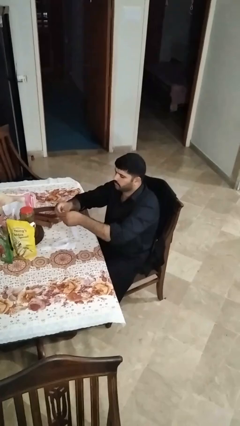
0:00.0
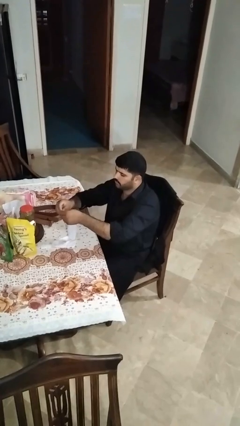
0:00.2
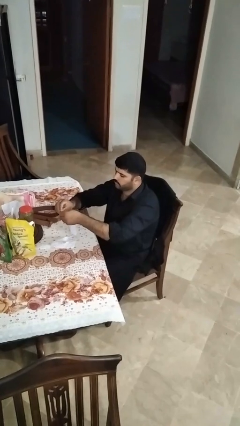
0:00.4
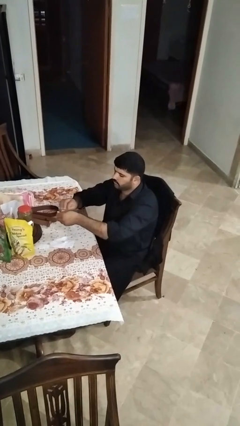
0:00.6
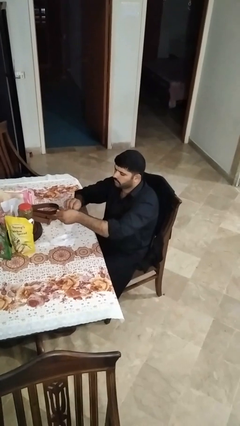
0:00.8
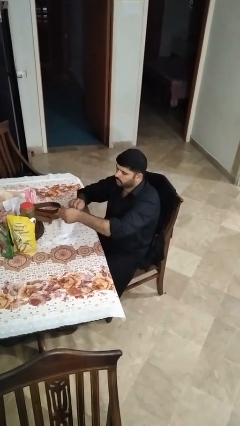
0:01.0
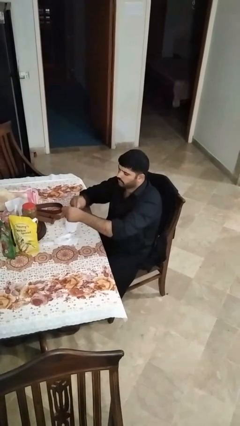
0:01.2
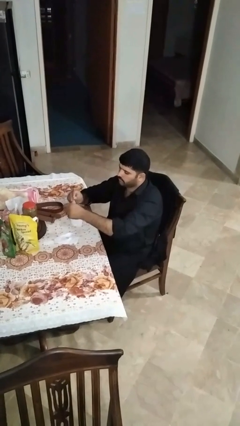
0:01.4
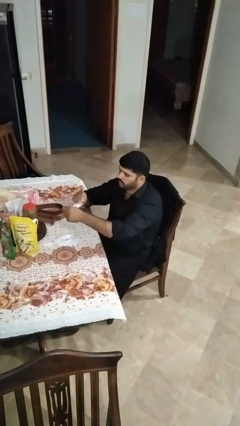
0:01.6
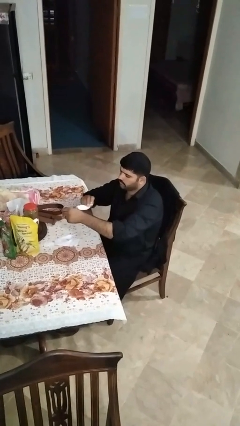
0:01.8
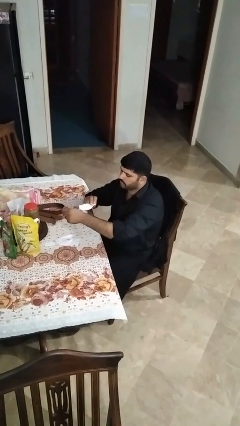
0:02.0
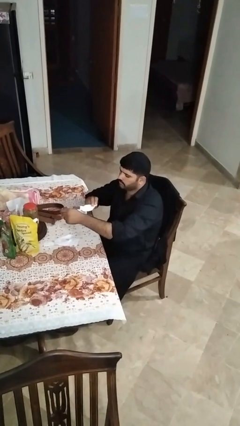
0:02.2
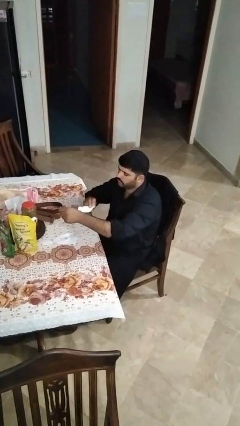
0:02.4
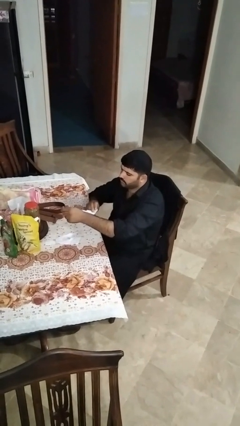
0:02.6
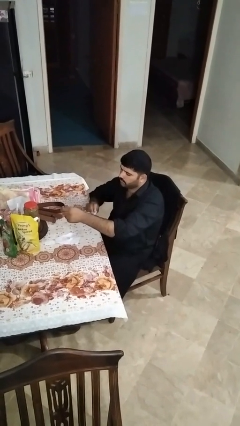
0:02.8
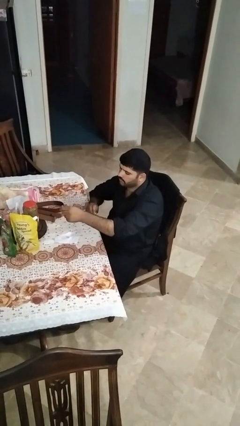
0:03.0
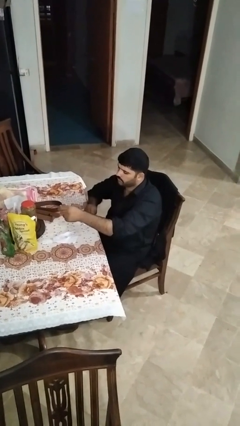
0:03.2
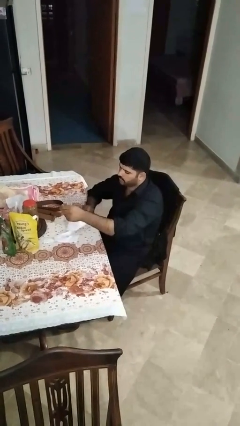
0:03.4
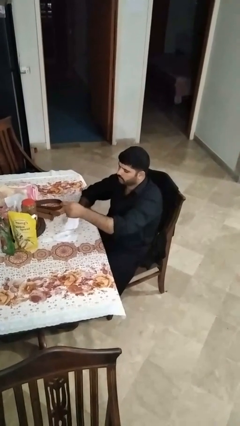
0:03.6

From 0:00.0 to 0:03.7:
person tears paper

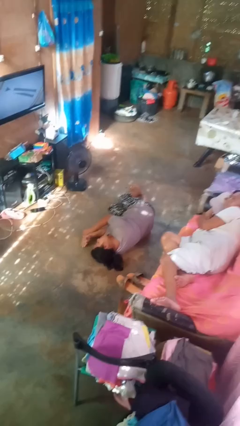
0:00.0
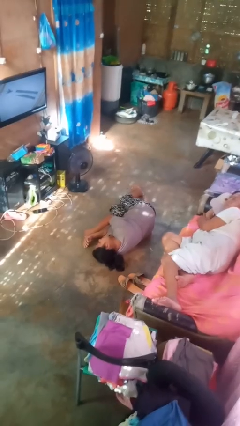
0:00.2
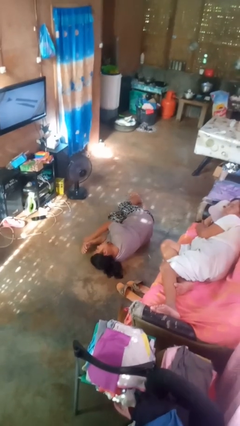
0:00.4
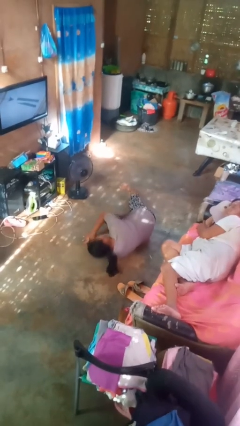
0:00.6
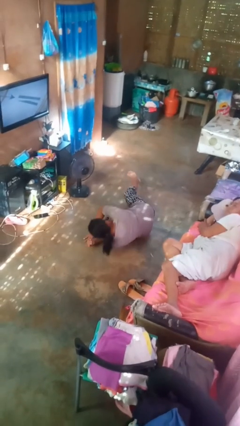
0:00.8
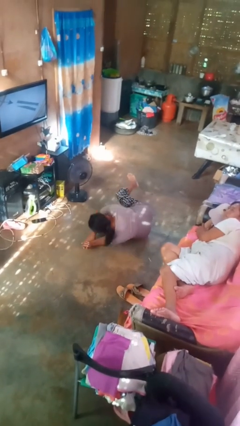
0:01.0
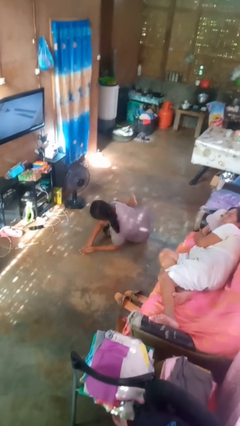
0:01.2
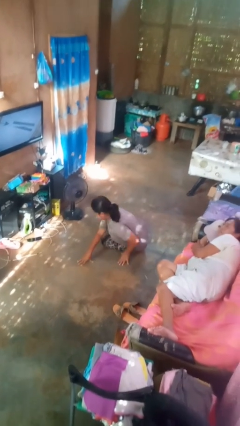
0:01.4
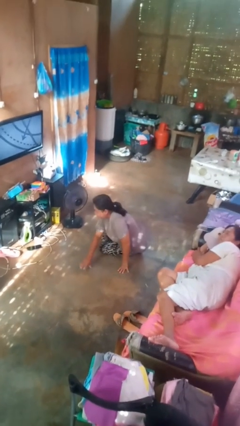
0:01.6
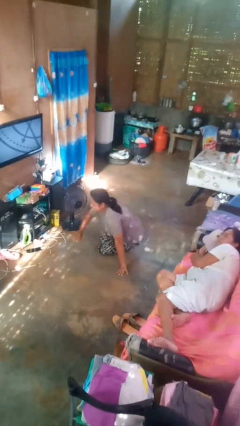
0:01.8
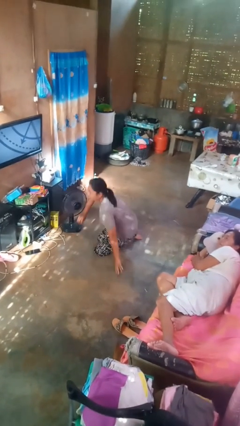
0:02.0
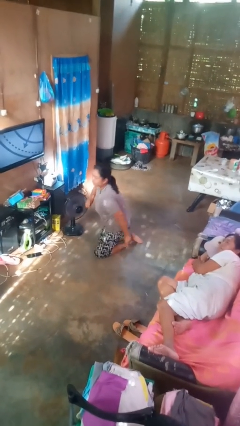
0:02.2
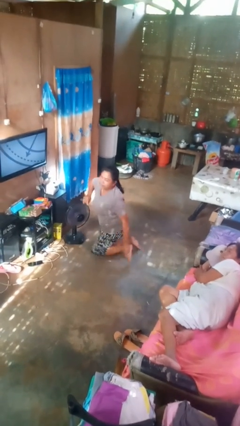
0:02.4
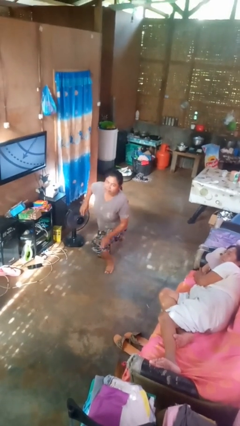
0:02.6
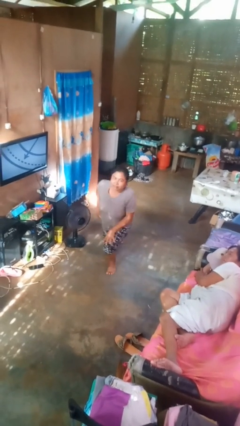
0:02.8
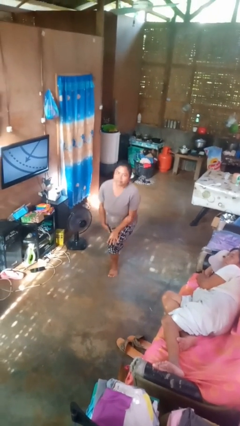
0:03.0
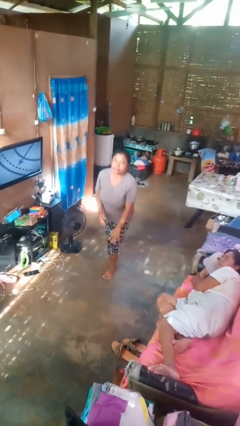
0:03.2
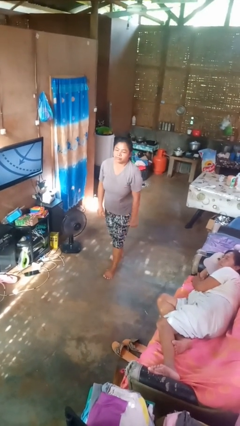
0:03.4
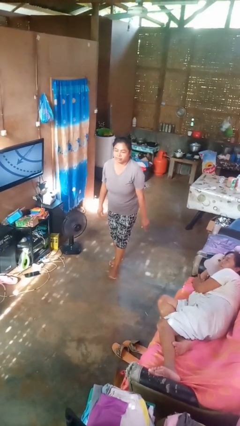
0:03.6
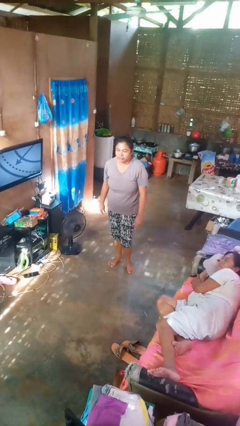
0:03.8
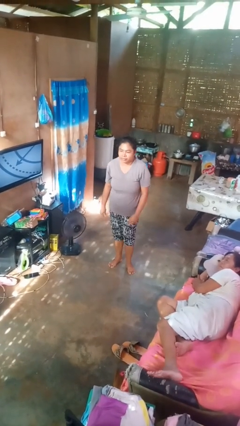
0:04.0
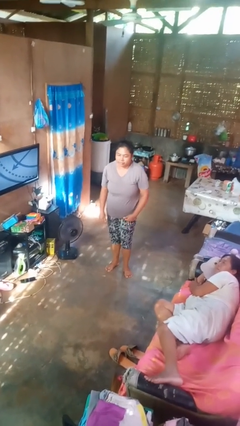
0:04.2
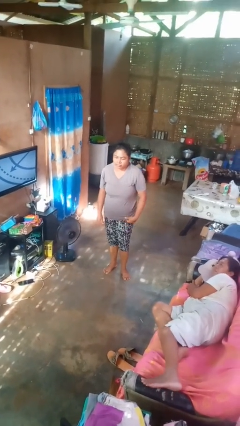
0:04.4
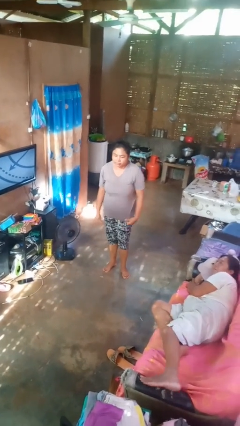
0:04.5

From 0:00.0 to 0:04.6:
person stands up from floor

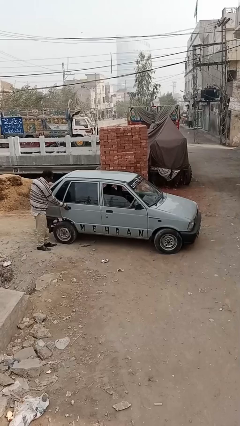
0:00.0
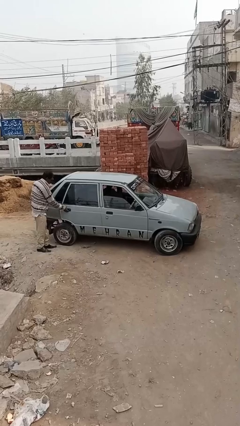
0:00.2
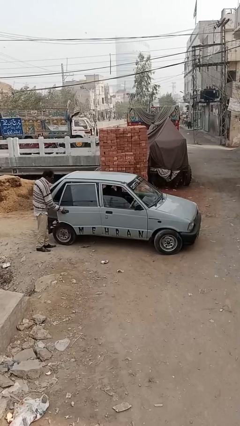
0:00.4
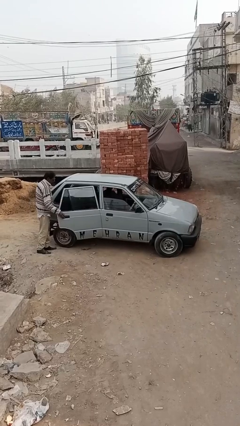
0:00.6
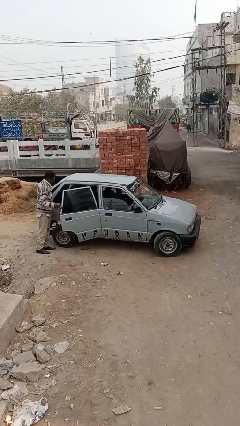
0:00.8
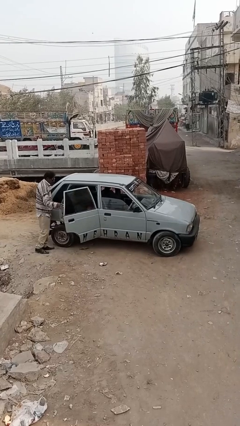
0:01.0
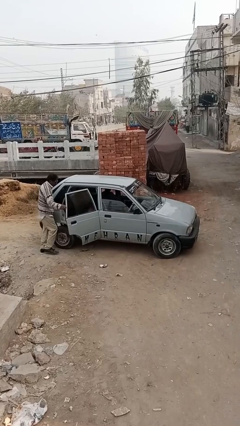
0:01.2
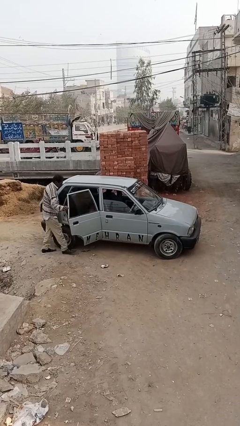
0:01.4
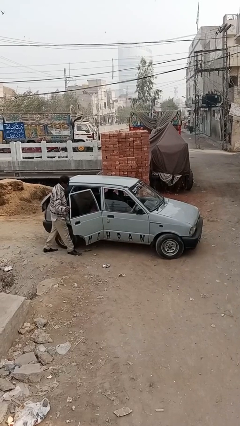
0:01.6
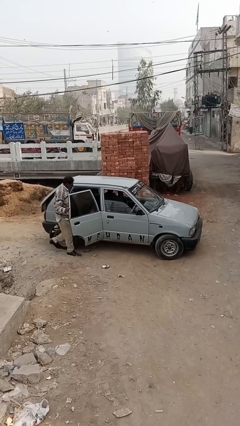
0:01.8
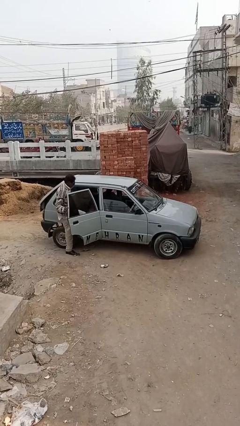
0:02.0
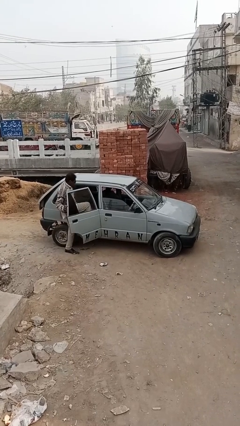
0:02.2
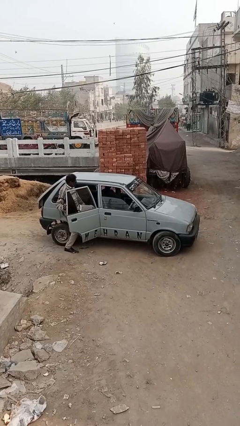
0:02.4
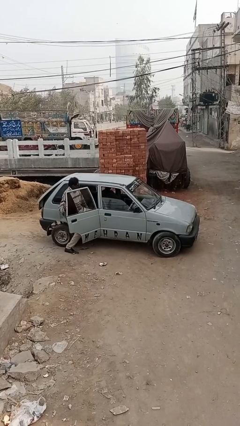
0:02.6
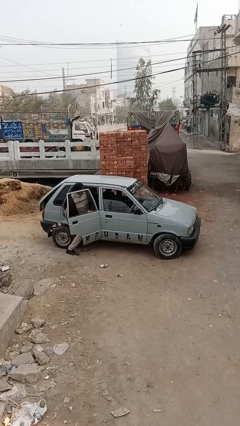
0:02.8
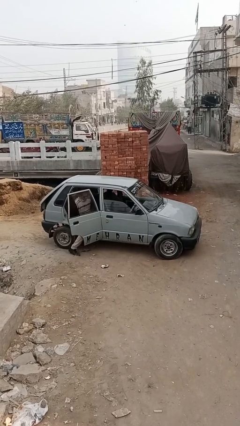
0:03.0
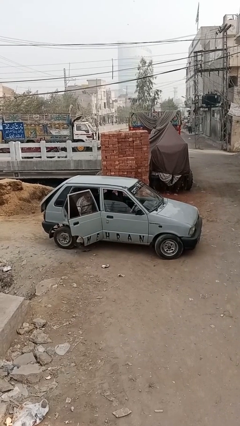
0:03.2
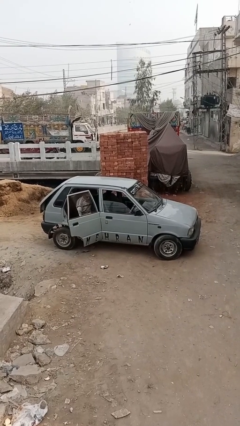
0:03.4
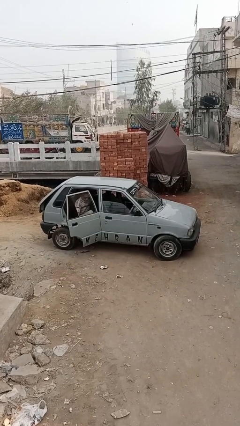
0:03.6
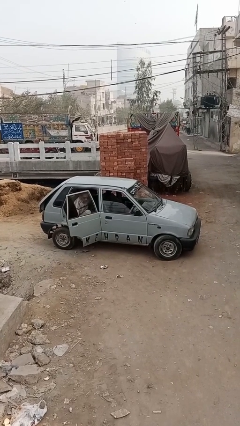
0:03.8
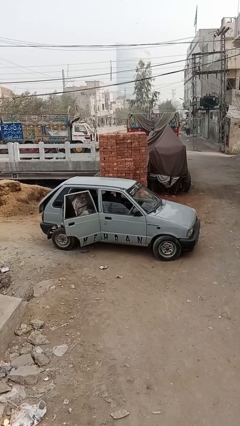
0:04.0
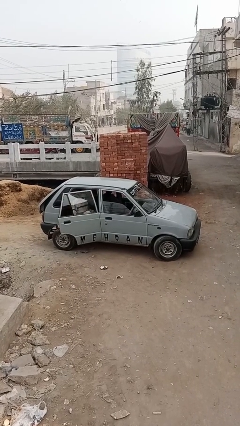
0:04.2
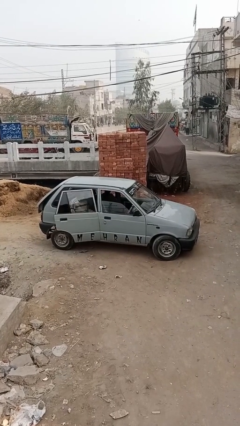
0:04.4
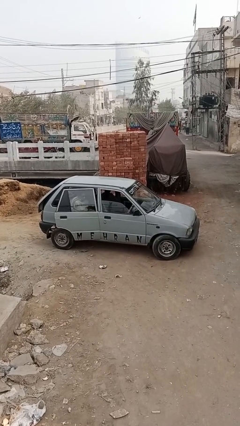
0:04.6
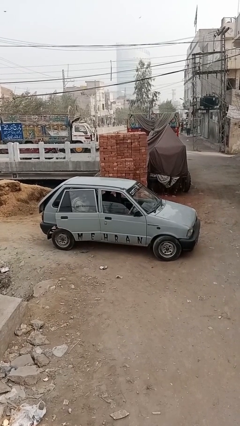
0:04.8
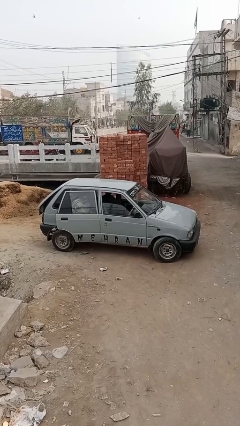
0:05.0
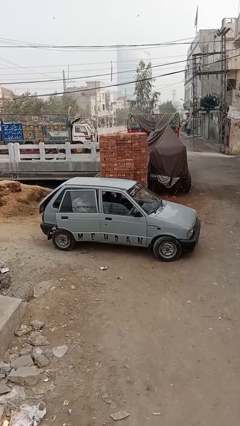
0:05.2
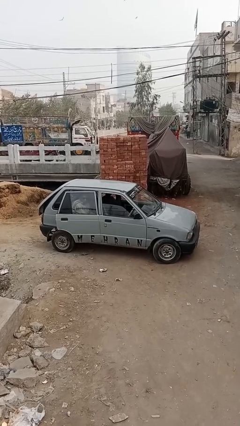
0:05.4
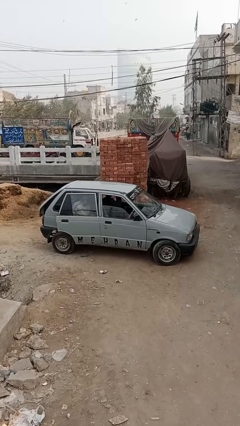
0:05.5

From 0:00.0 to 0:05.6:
car picks up person

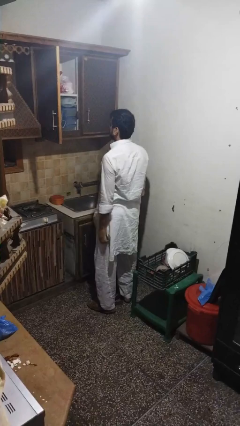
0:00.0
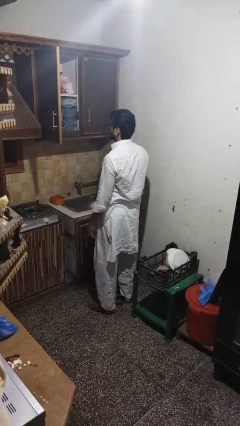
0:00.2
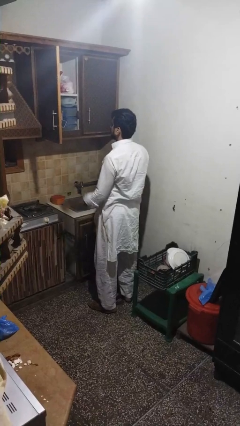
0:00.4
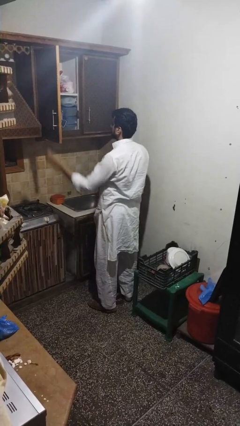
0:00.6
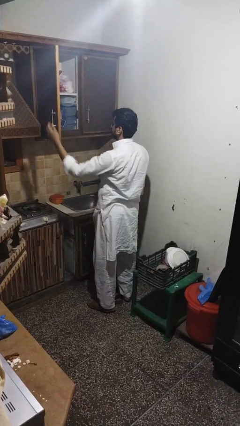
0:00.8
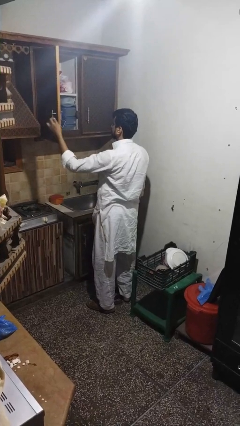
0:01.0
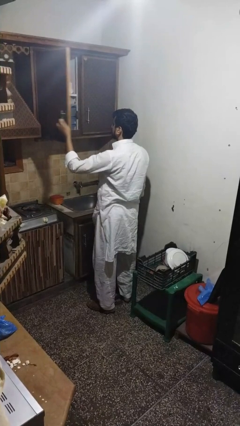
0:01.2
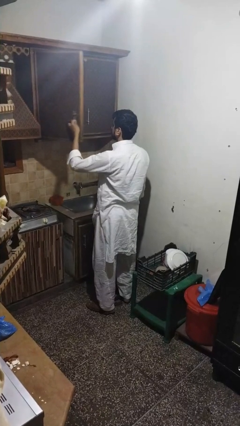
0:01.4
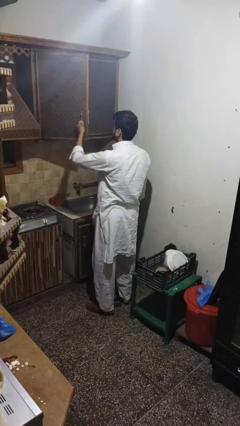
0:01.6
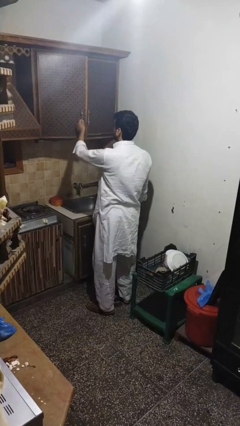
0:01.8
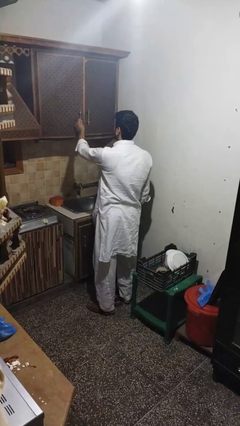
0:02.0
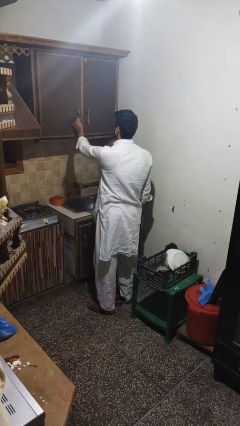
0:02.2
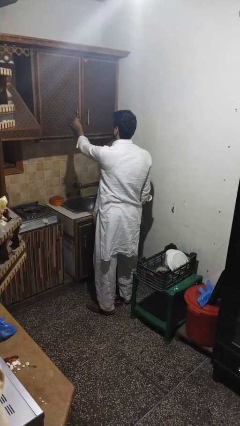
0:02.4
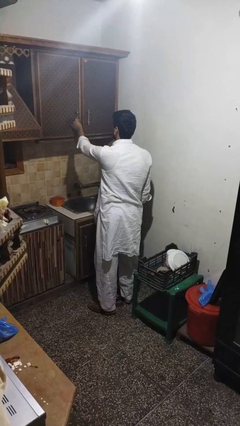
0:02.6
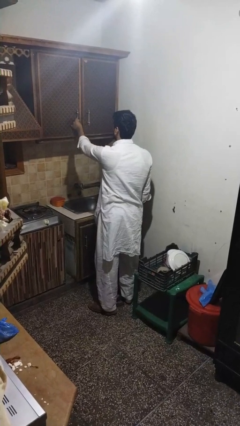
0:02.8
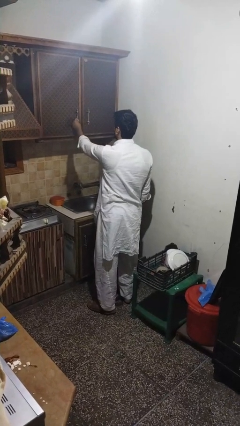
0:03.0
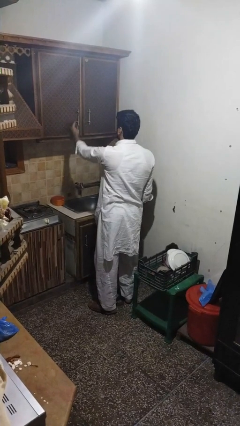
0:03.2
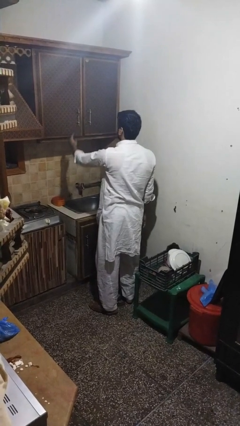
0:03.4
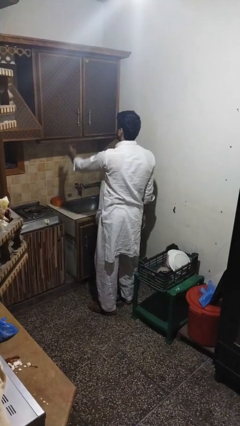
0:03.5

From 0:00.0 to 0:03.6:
person closes cabinet

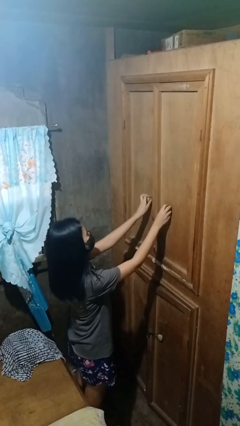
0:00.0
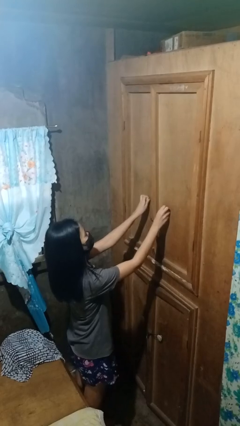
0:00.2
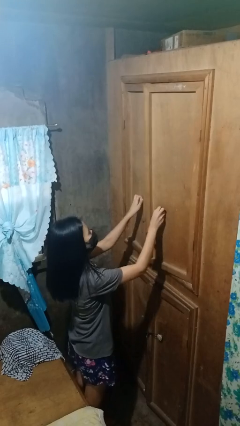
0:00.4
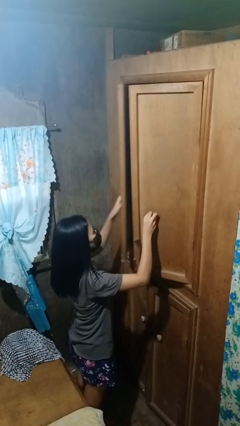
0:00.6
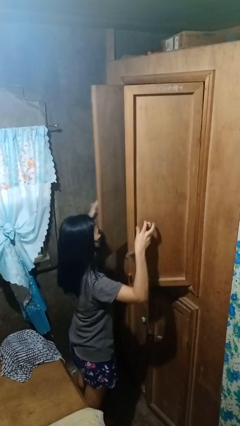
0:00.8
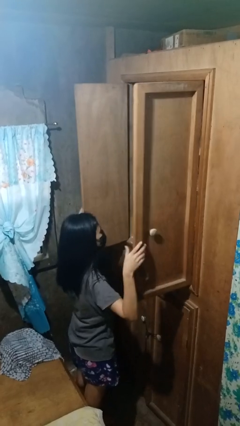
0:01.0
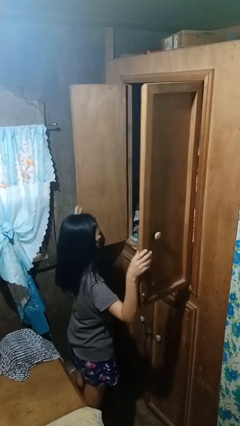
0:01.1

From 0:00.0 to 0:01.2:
person opens closet door
